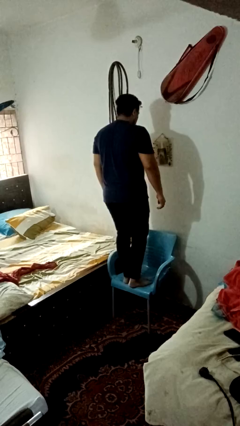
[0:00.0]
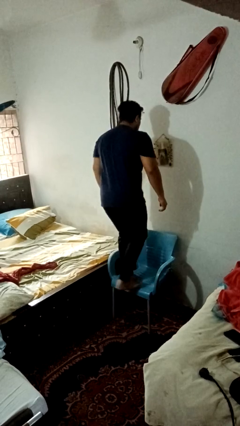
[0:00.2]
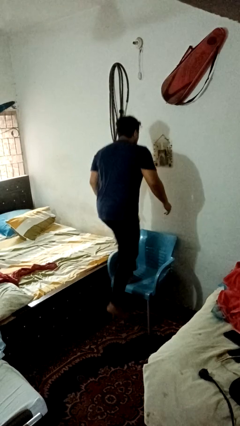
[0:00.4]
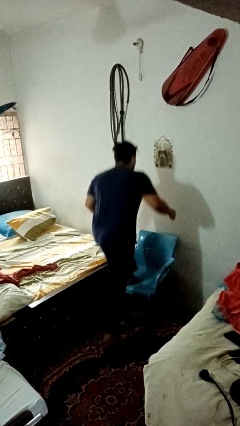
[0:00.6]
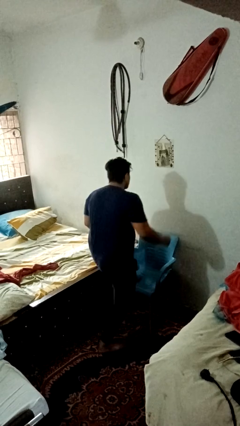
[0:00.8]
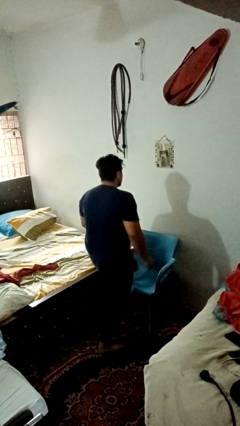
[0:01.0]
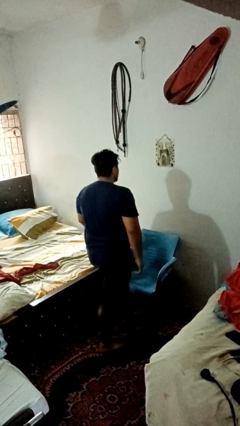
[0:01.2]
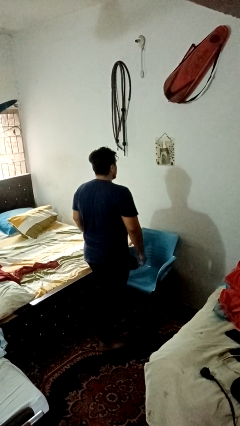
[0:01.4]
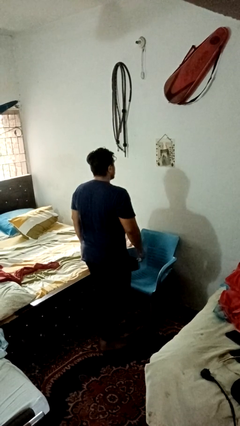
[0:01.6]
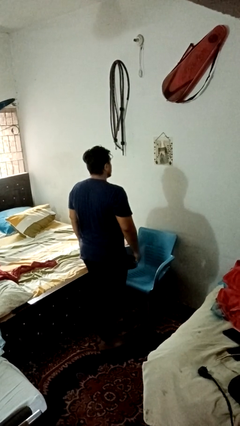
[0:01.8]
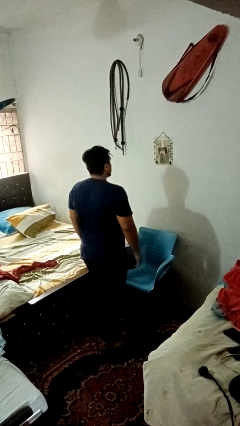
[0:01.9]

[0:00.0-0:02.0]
person climbs off chair

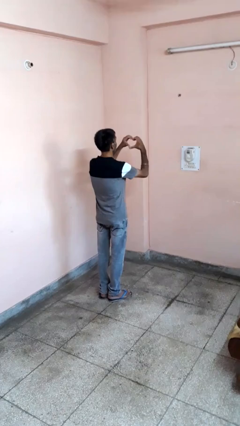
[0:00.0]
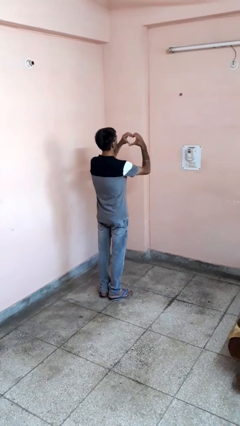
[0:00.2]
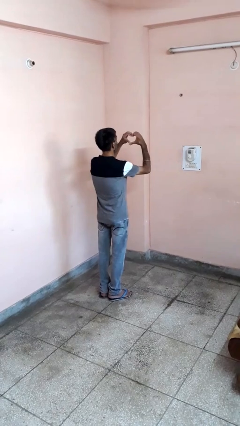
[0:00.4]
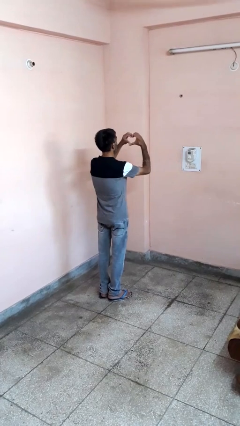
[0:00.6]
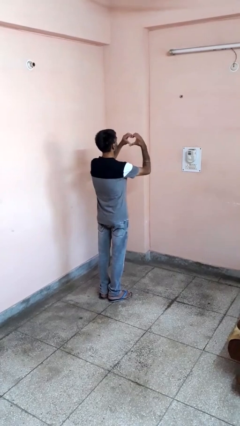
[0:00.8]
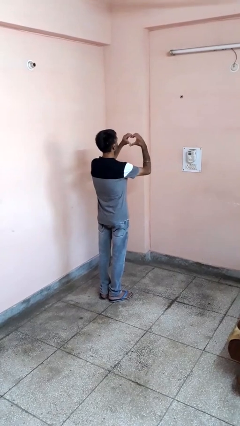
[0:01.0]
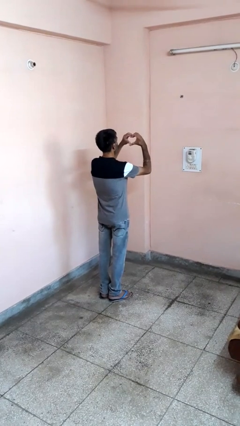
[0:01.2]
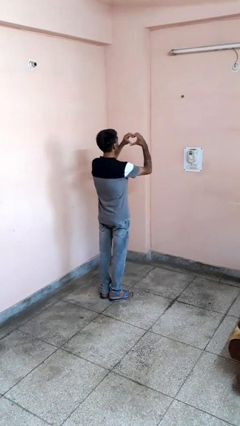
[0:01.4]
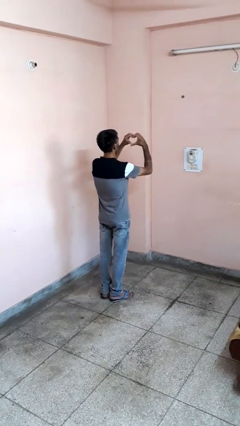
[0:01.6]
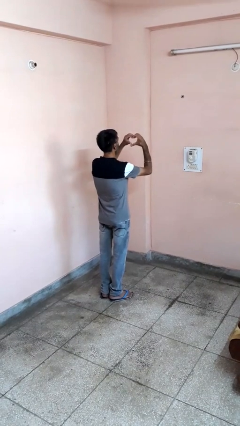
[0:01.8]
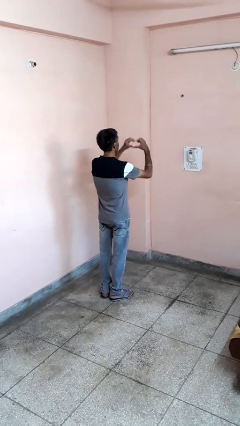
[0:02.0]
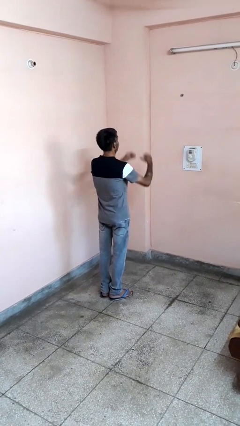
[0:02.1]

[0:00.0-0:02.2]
person gestures heart

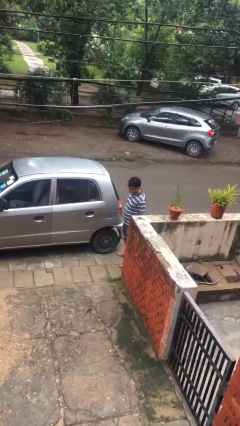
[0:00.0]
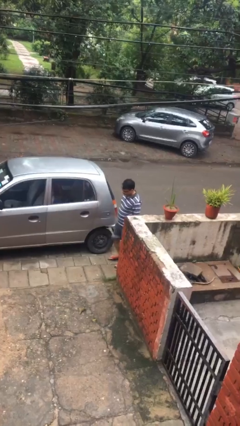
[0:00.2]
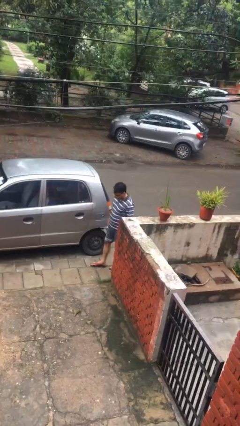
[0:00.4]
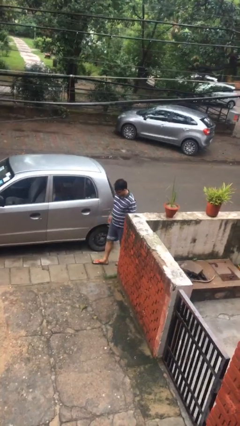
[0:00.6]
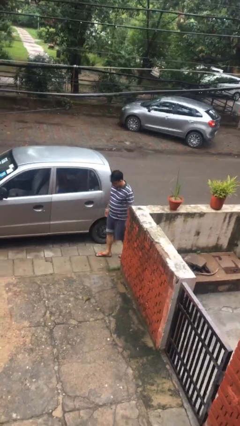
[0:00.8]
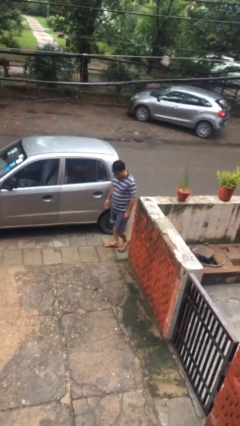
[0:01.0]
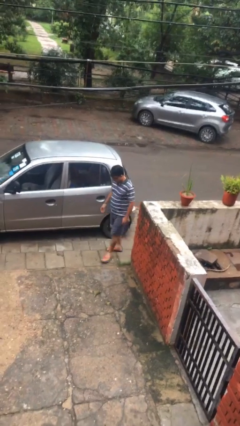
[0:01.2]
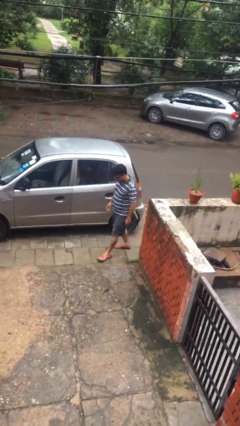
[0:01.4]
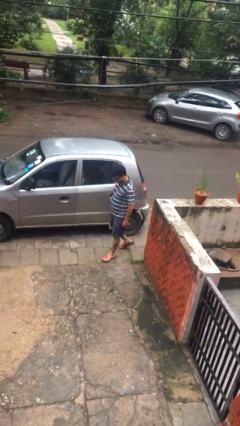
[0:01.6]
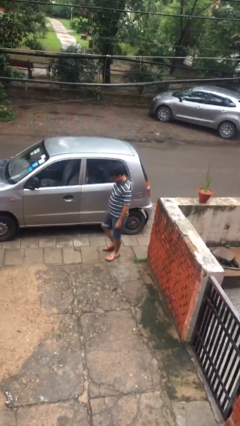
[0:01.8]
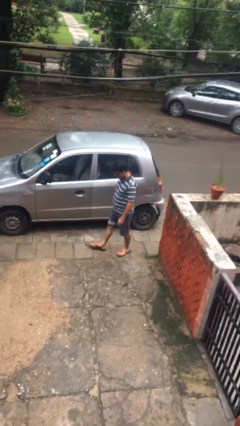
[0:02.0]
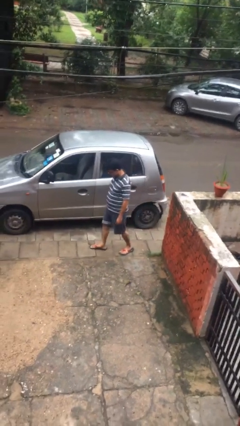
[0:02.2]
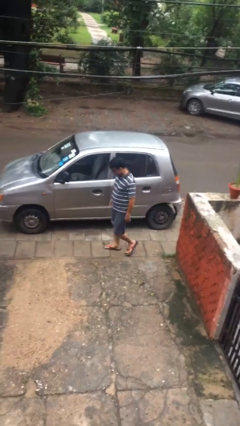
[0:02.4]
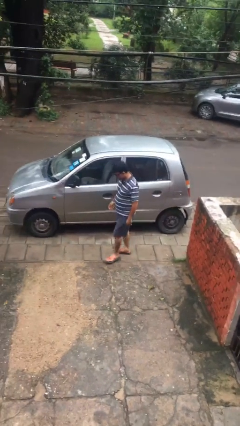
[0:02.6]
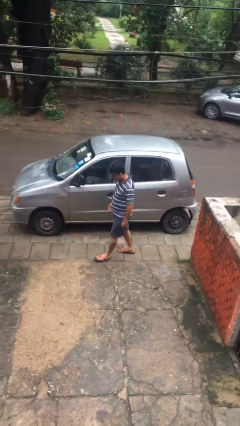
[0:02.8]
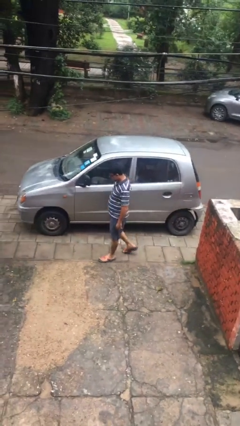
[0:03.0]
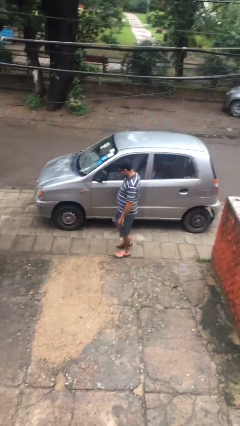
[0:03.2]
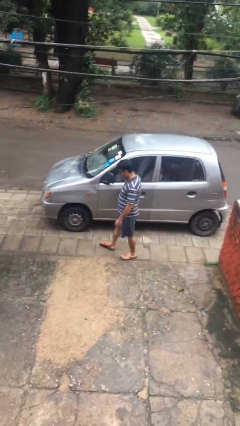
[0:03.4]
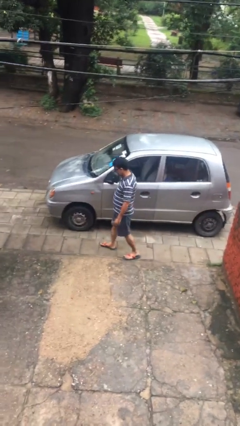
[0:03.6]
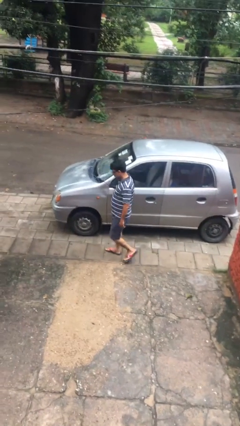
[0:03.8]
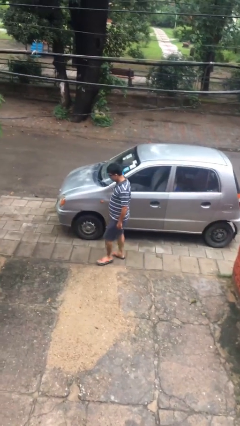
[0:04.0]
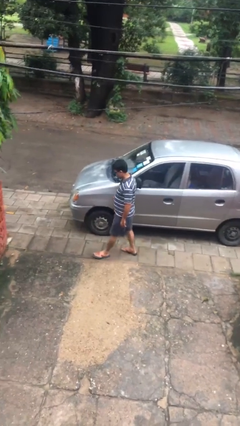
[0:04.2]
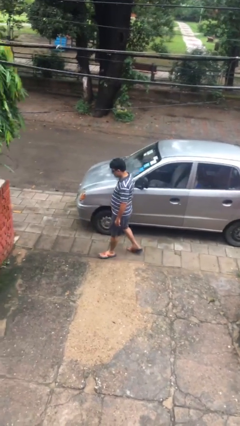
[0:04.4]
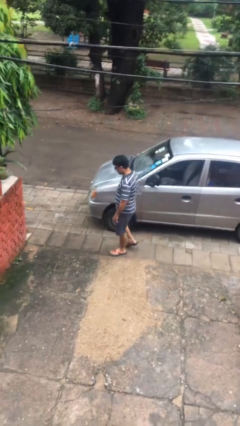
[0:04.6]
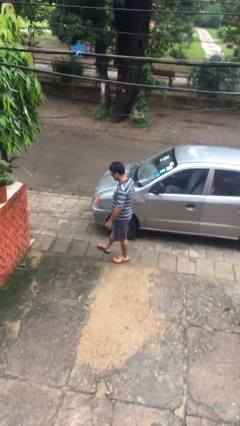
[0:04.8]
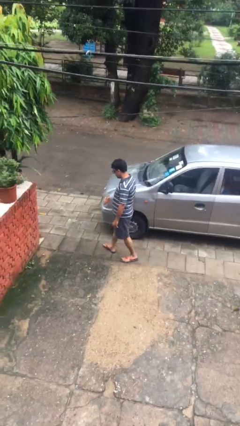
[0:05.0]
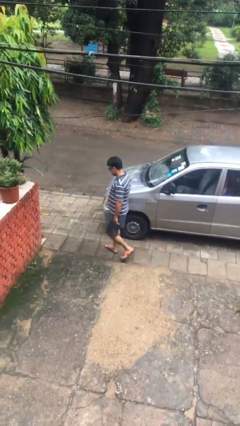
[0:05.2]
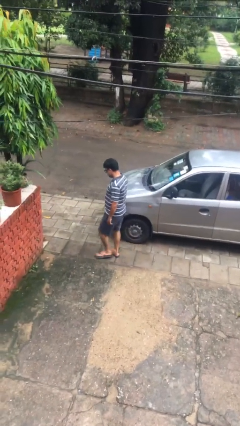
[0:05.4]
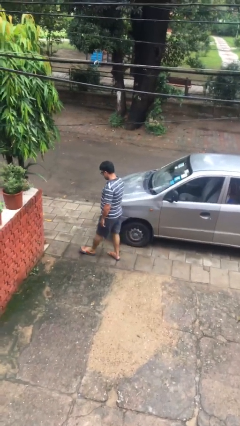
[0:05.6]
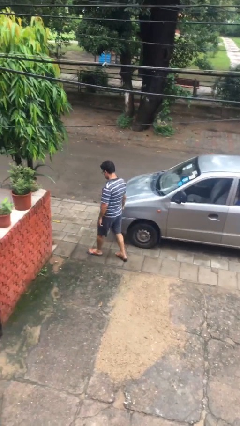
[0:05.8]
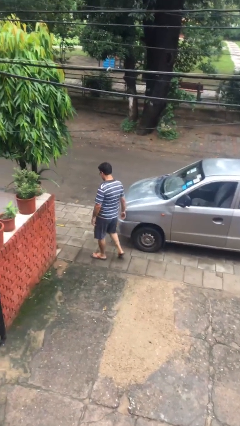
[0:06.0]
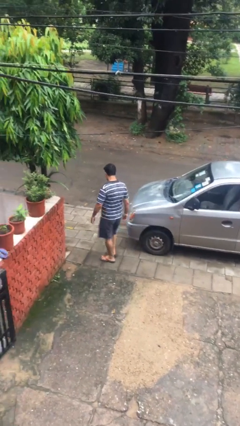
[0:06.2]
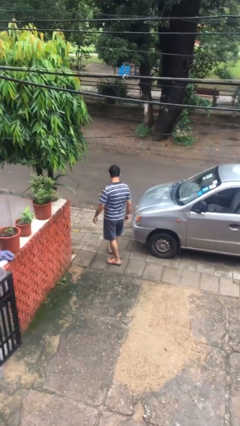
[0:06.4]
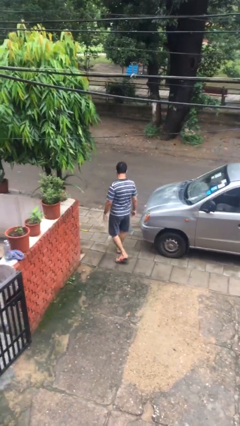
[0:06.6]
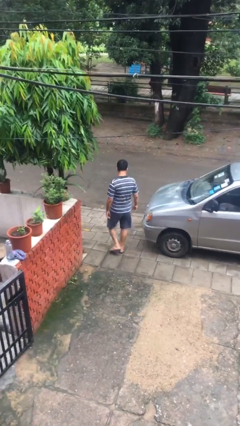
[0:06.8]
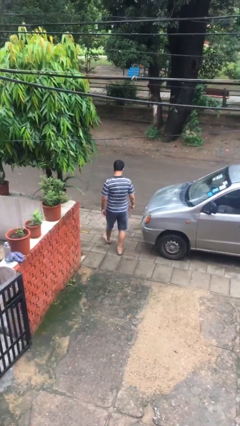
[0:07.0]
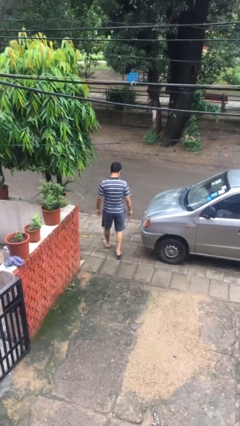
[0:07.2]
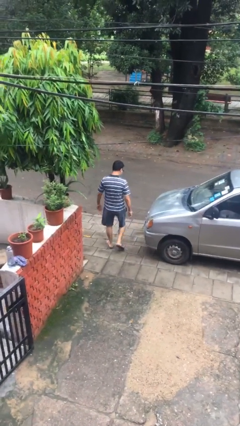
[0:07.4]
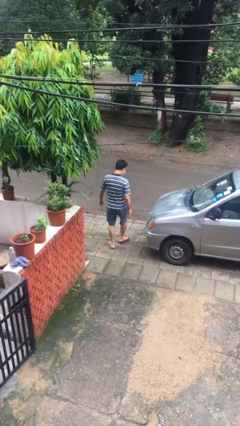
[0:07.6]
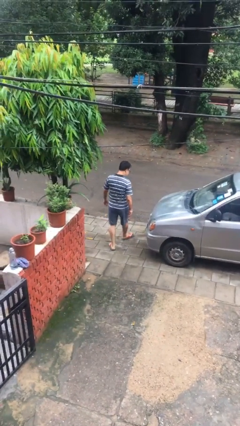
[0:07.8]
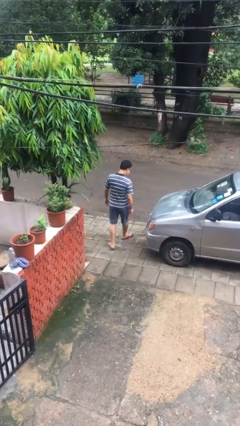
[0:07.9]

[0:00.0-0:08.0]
person walks around car

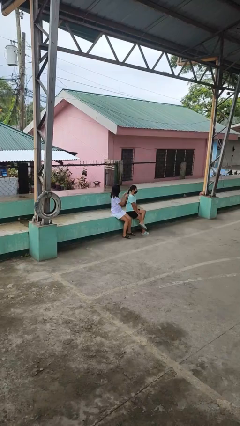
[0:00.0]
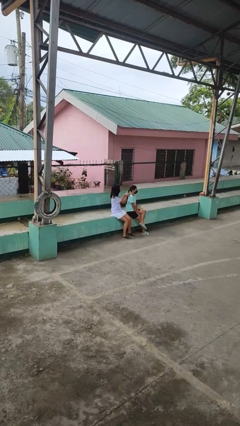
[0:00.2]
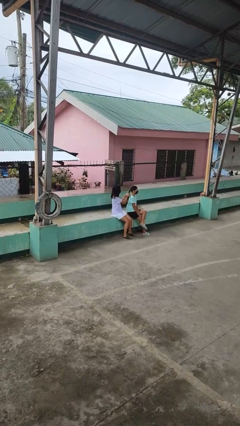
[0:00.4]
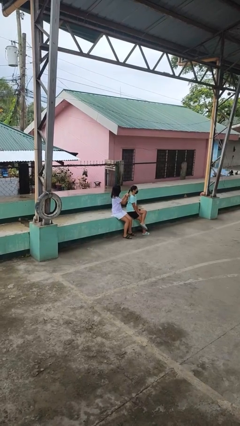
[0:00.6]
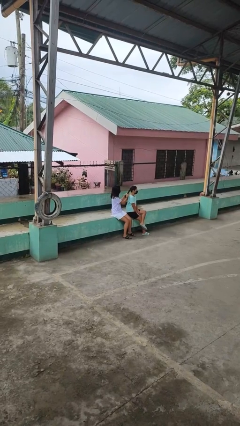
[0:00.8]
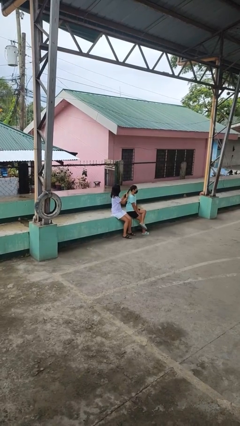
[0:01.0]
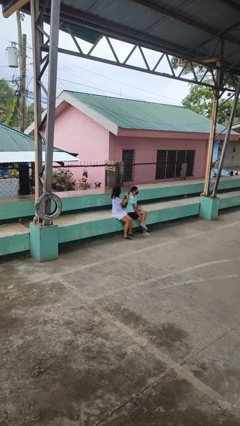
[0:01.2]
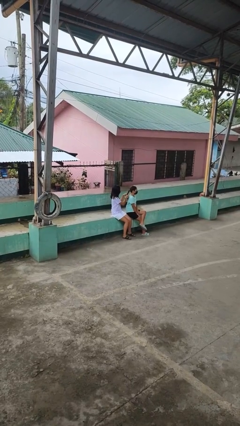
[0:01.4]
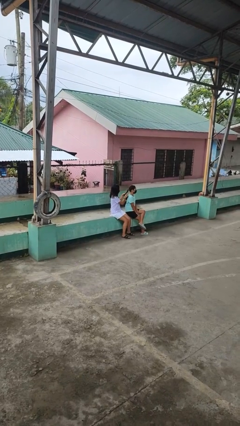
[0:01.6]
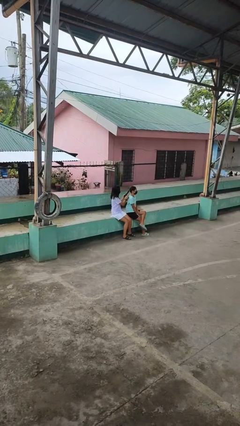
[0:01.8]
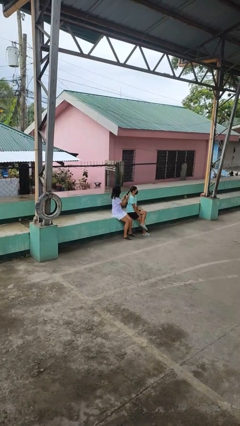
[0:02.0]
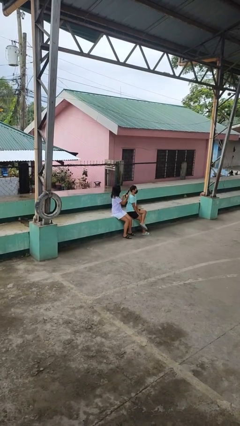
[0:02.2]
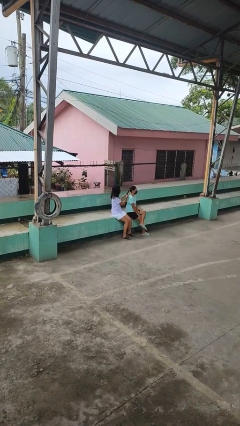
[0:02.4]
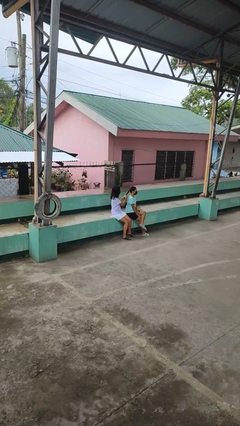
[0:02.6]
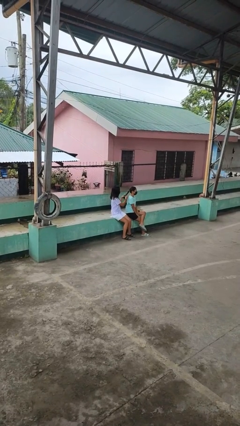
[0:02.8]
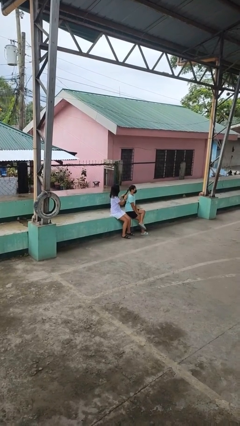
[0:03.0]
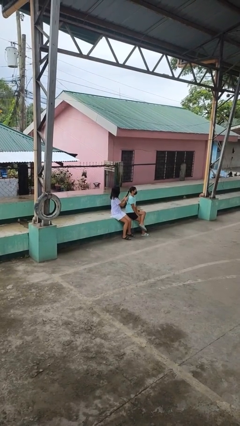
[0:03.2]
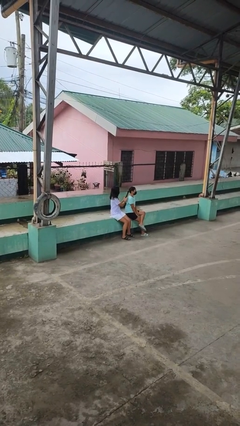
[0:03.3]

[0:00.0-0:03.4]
person braids hair of person

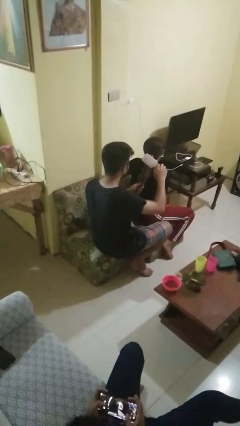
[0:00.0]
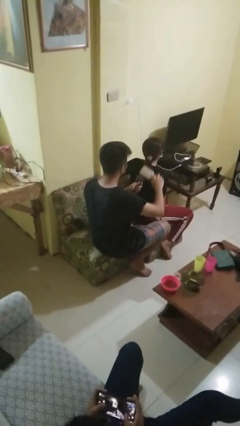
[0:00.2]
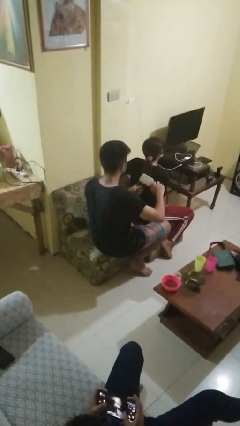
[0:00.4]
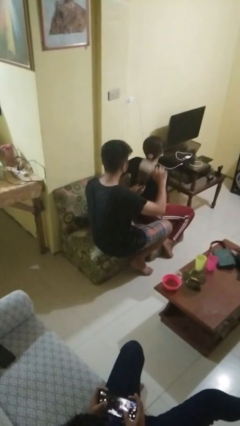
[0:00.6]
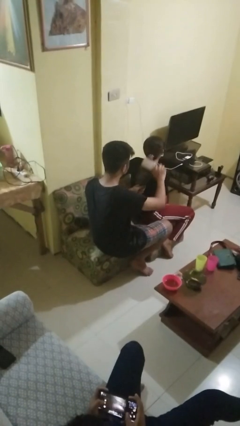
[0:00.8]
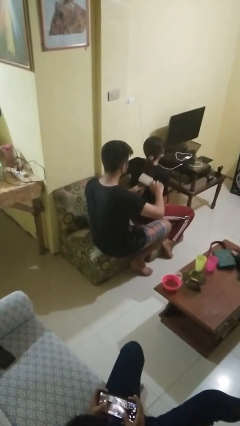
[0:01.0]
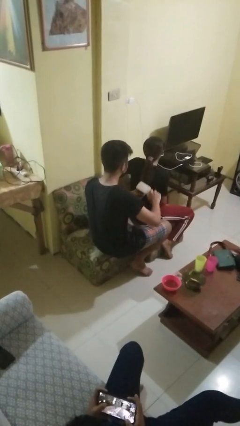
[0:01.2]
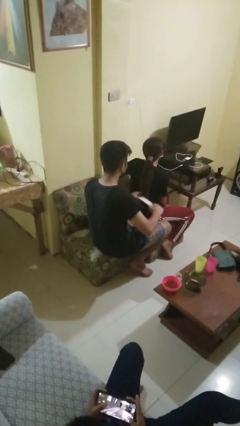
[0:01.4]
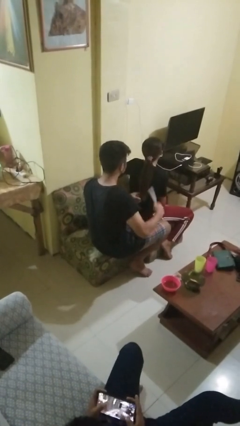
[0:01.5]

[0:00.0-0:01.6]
person brushes hair of person

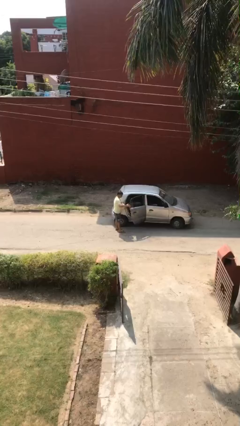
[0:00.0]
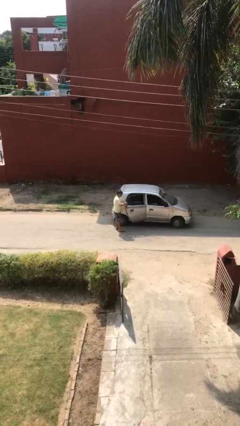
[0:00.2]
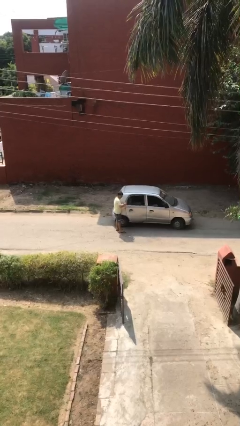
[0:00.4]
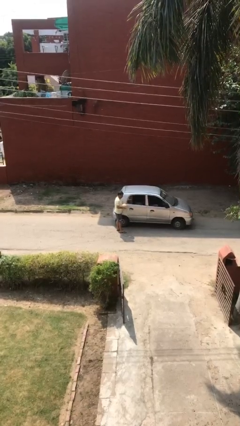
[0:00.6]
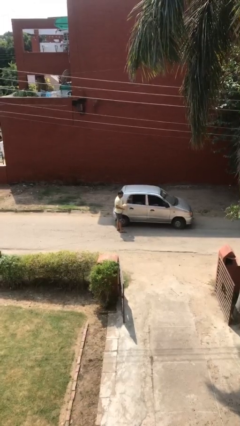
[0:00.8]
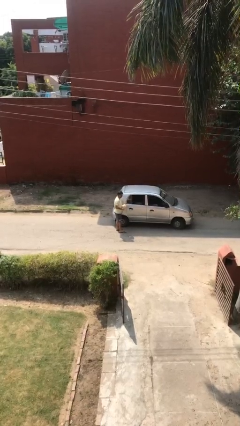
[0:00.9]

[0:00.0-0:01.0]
person closes car door
